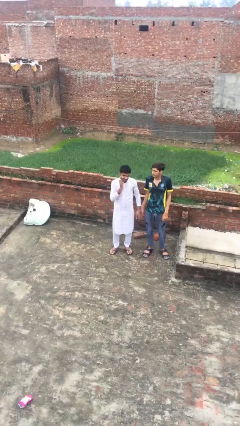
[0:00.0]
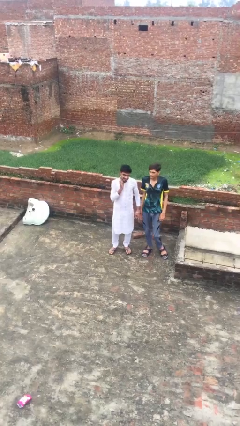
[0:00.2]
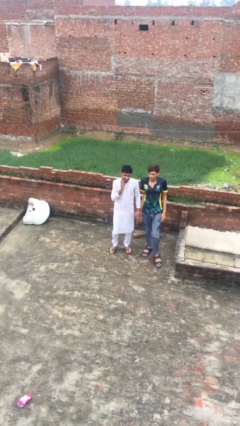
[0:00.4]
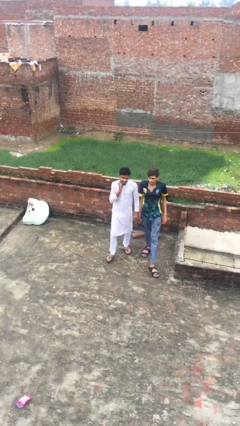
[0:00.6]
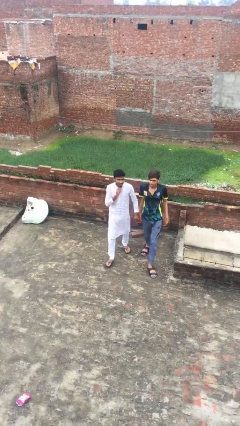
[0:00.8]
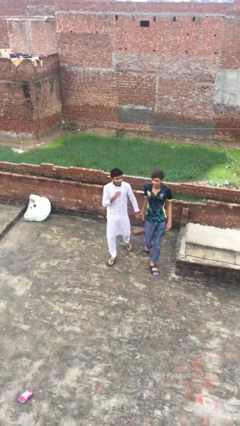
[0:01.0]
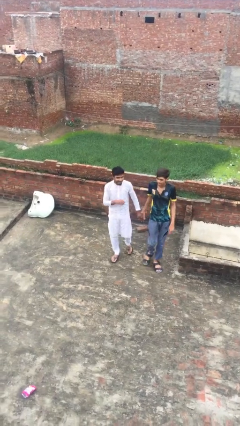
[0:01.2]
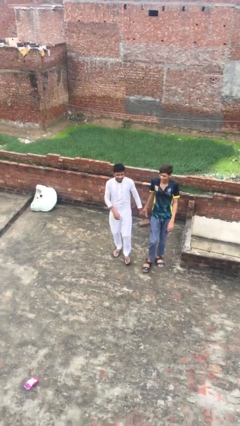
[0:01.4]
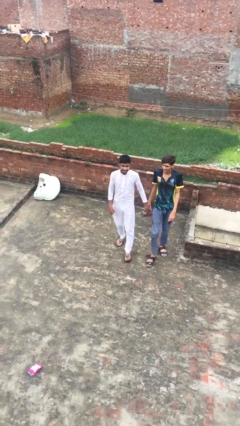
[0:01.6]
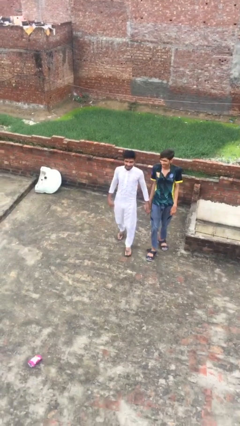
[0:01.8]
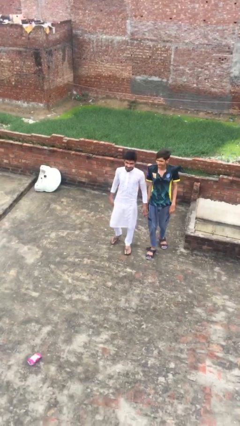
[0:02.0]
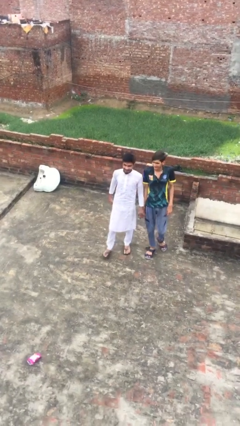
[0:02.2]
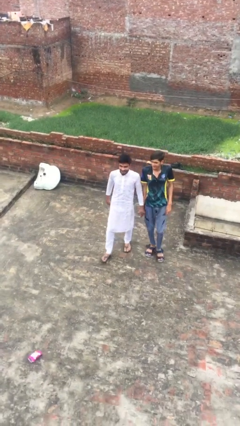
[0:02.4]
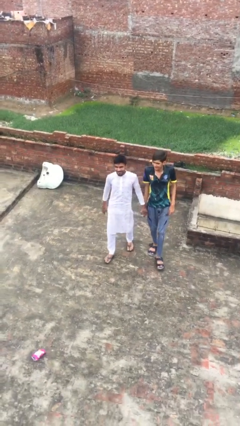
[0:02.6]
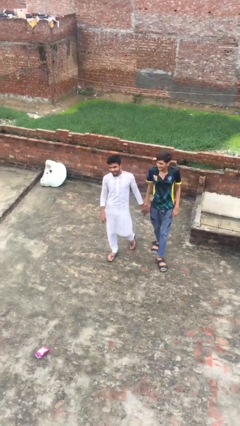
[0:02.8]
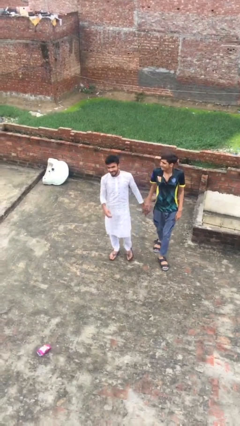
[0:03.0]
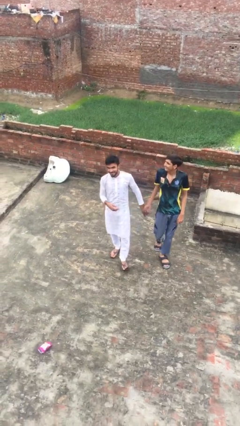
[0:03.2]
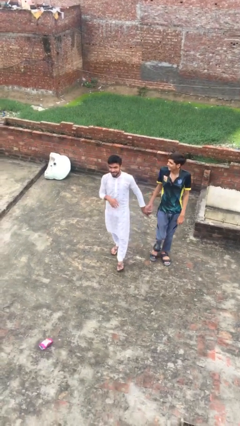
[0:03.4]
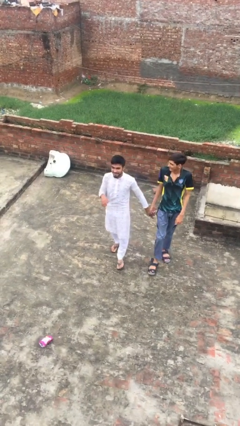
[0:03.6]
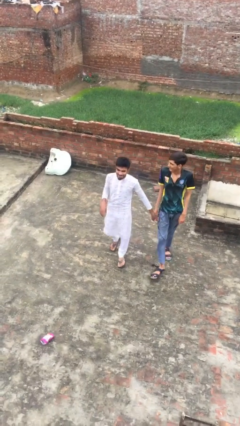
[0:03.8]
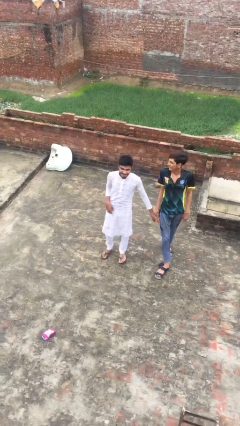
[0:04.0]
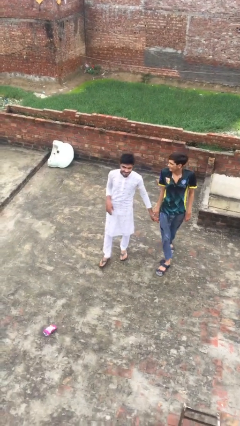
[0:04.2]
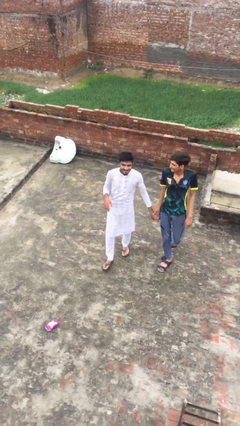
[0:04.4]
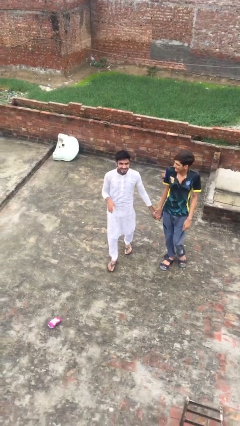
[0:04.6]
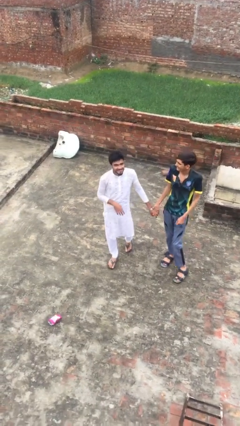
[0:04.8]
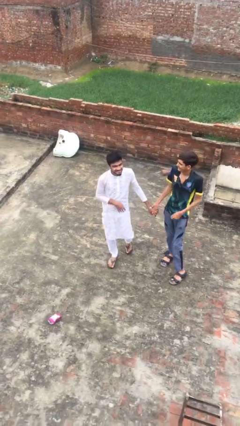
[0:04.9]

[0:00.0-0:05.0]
person holds hand

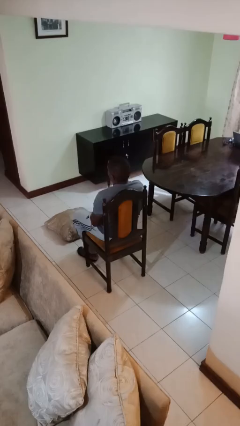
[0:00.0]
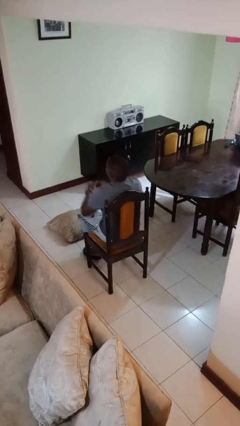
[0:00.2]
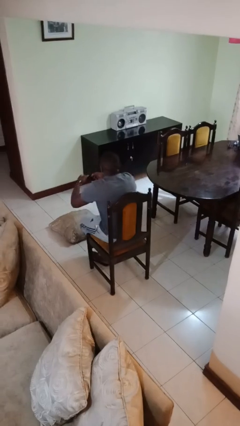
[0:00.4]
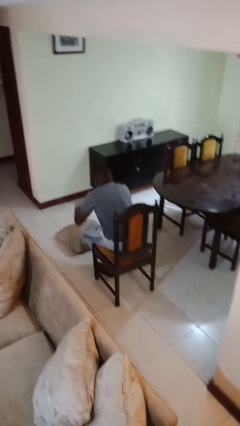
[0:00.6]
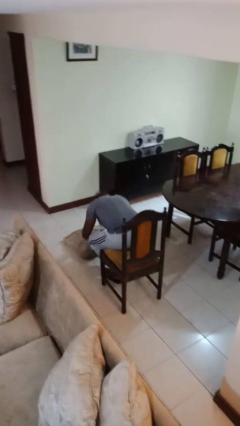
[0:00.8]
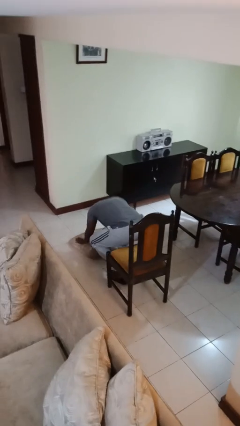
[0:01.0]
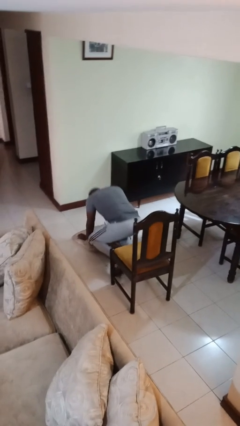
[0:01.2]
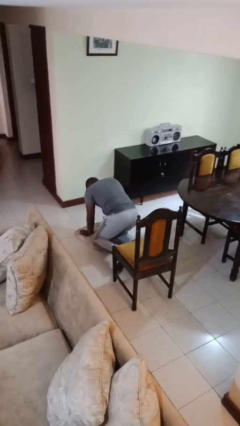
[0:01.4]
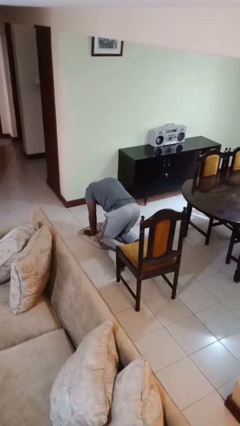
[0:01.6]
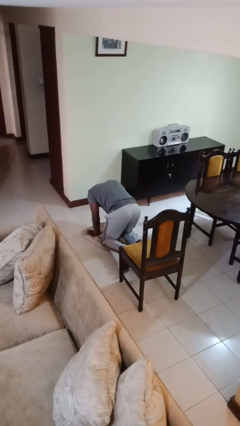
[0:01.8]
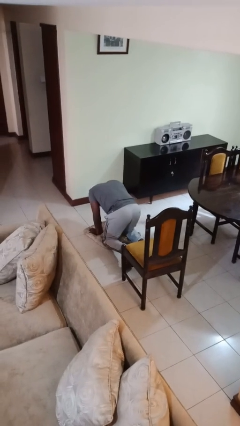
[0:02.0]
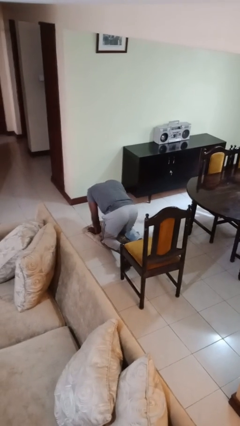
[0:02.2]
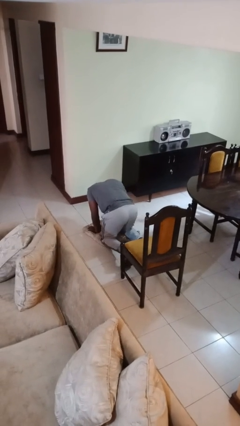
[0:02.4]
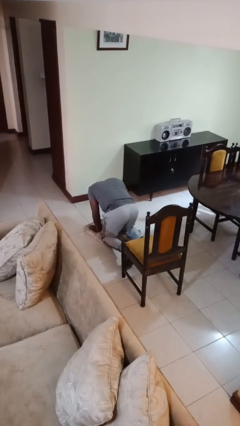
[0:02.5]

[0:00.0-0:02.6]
person falls from chair

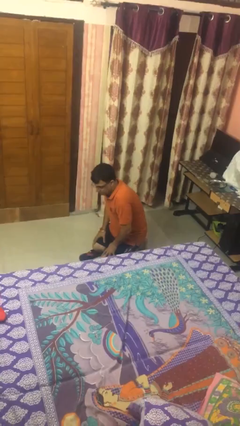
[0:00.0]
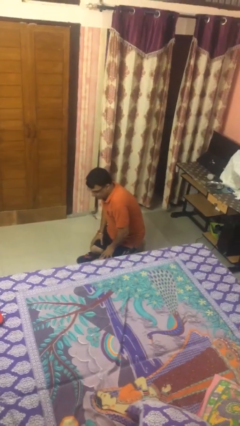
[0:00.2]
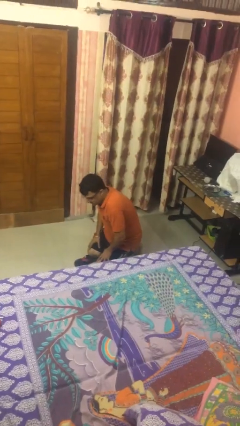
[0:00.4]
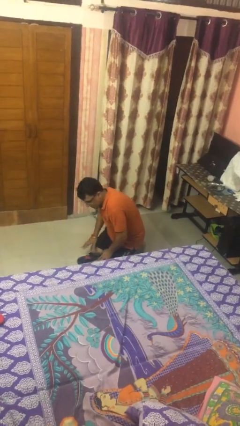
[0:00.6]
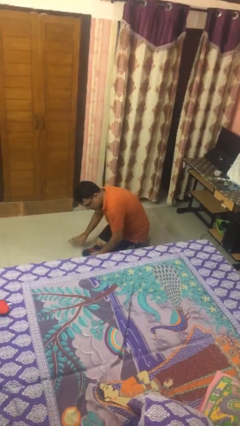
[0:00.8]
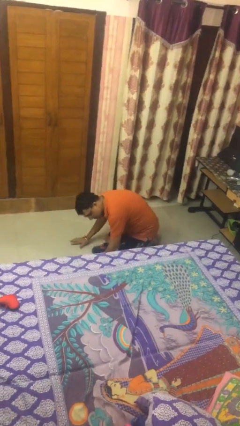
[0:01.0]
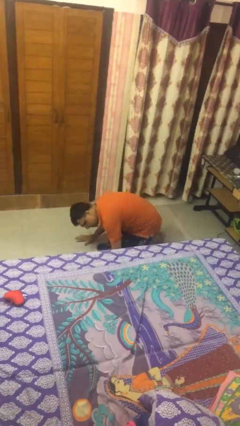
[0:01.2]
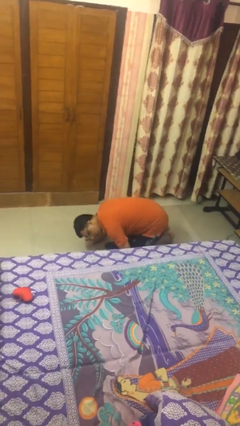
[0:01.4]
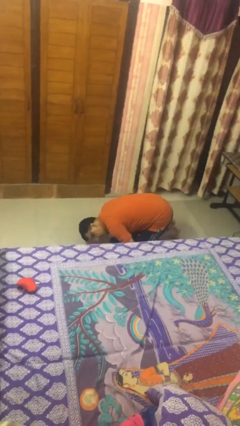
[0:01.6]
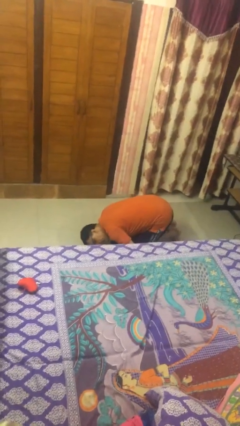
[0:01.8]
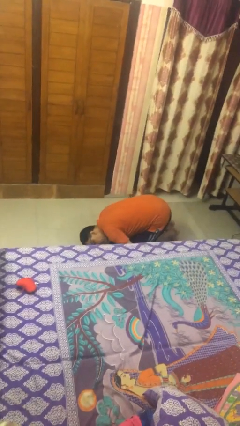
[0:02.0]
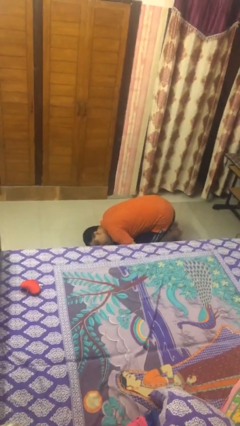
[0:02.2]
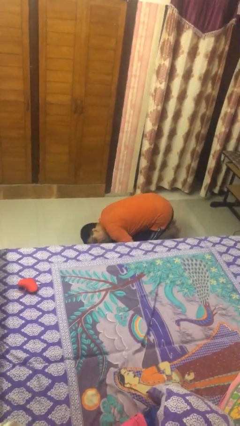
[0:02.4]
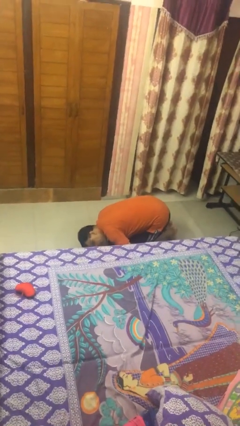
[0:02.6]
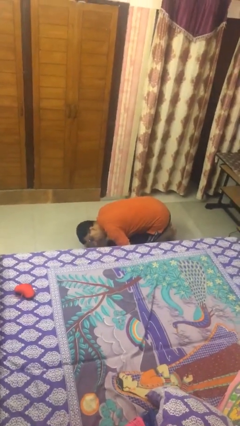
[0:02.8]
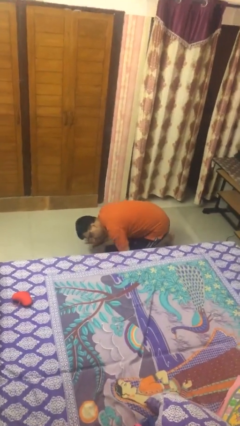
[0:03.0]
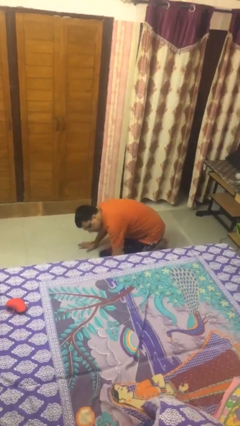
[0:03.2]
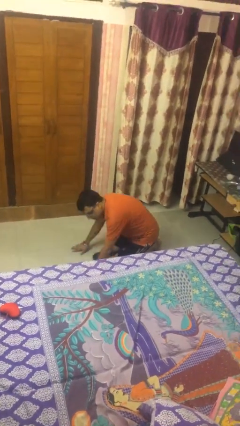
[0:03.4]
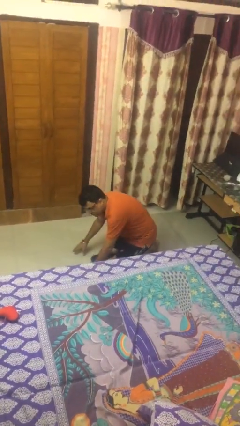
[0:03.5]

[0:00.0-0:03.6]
person searches under bed

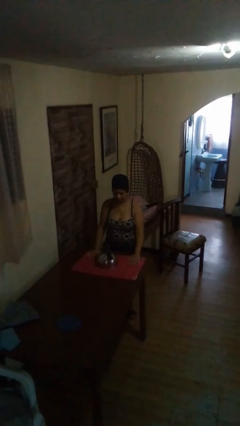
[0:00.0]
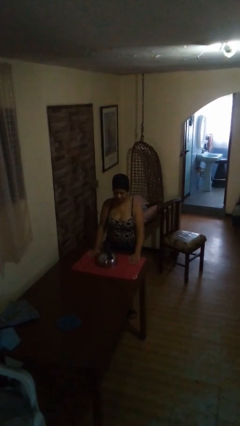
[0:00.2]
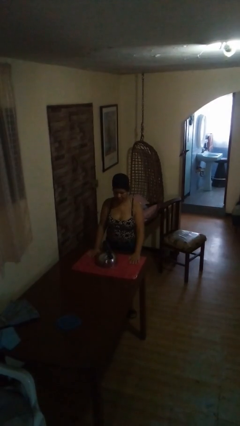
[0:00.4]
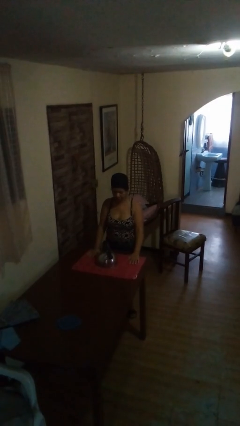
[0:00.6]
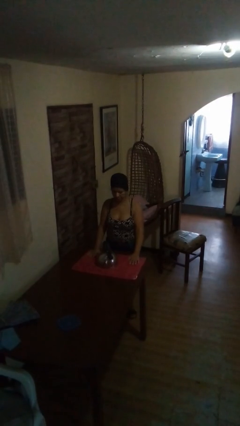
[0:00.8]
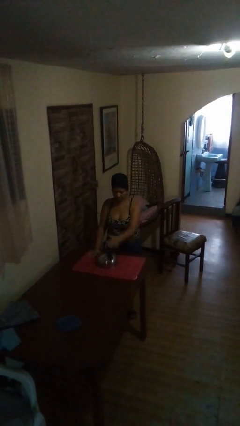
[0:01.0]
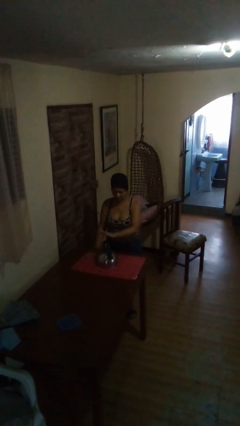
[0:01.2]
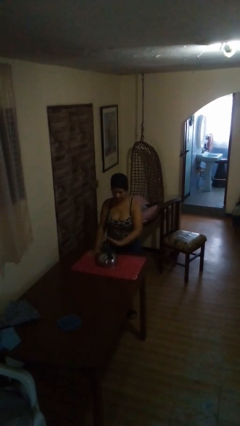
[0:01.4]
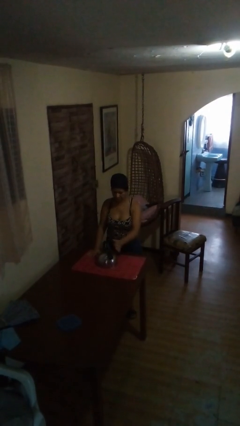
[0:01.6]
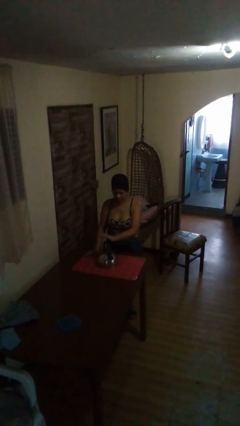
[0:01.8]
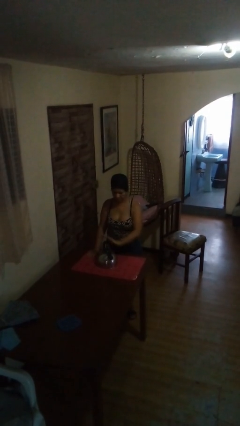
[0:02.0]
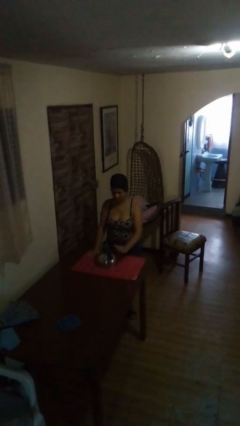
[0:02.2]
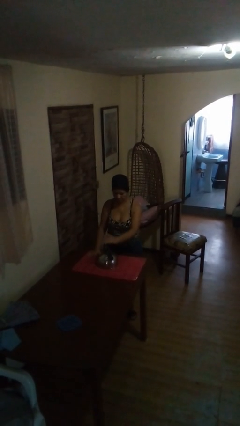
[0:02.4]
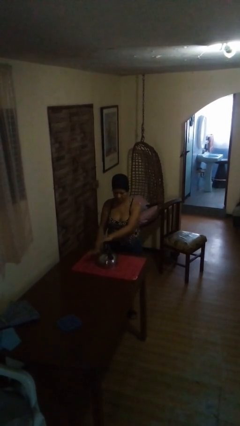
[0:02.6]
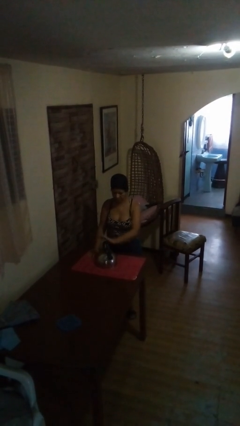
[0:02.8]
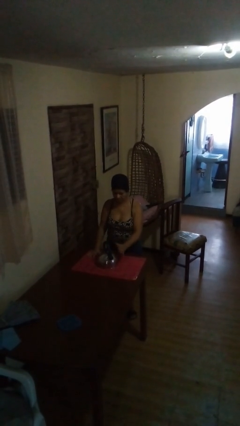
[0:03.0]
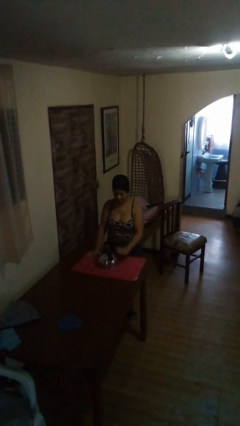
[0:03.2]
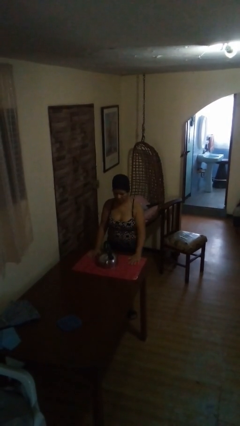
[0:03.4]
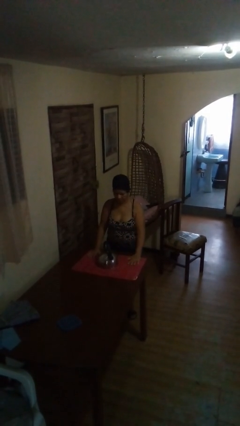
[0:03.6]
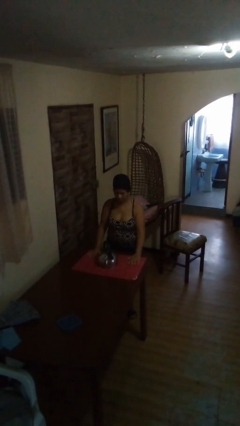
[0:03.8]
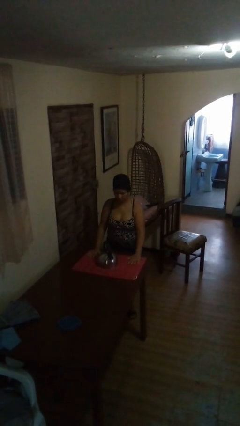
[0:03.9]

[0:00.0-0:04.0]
person waves hand over object

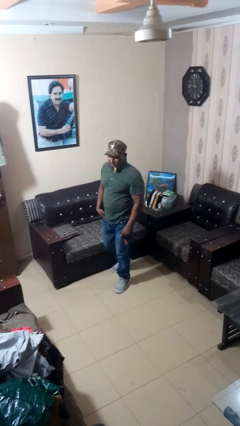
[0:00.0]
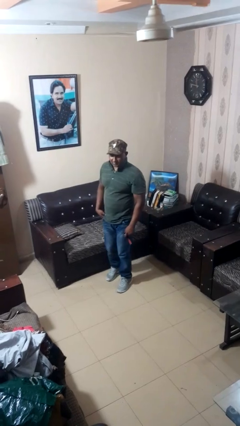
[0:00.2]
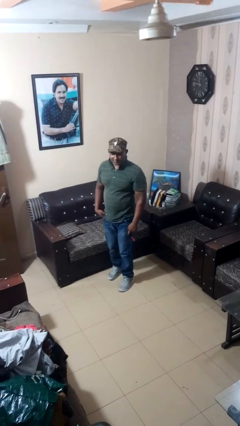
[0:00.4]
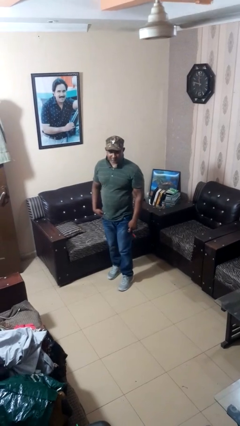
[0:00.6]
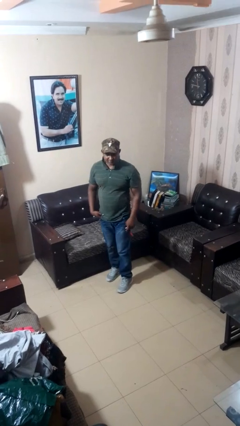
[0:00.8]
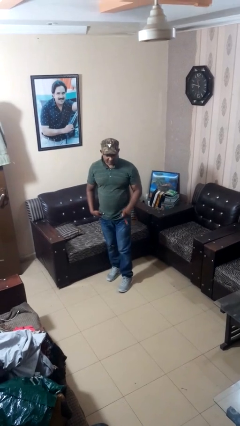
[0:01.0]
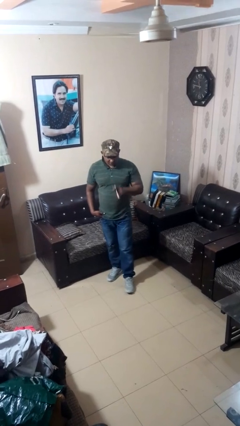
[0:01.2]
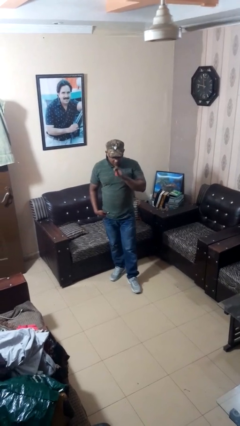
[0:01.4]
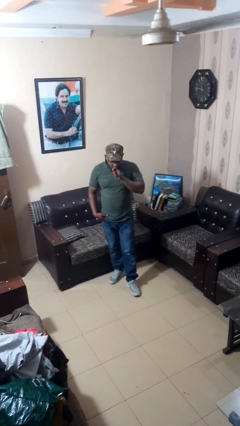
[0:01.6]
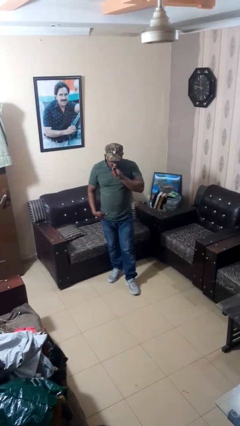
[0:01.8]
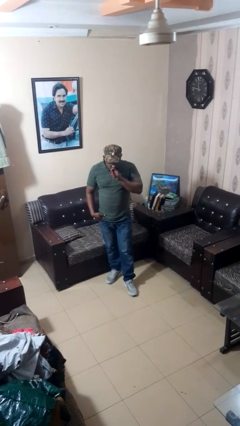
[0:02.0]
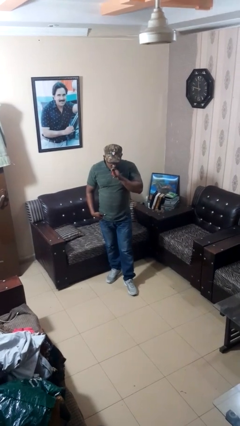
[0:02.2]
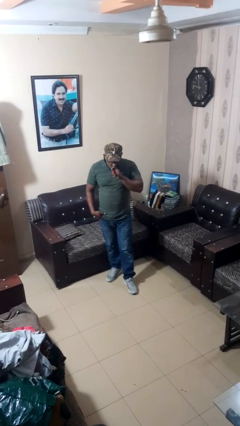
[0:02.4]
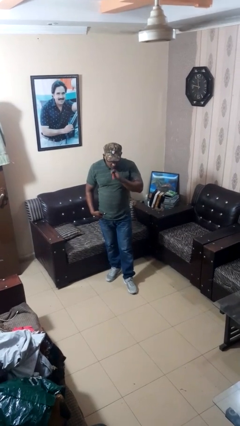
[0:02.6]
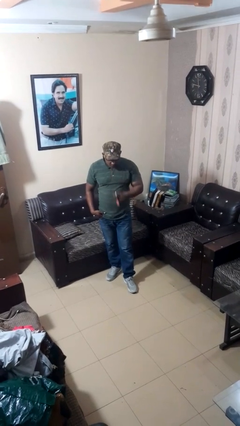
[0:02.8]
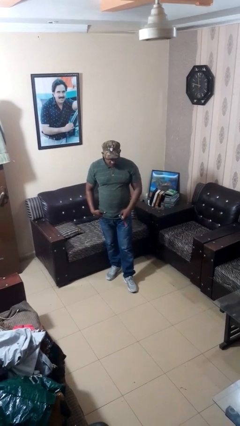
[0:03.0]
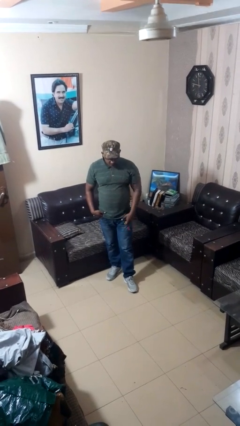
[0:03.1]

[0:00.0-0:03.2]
person vapes
